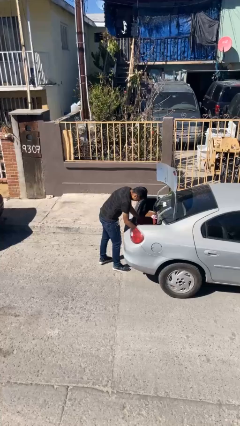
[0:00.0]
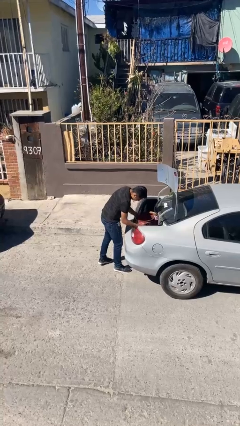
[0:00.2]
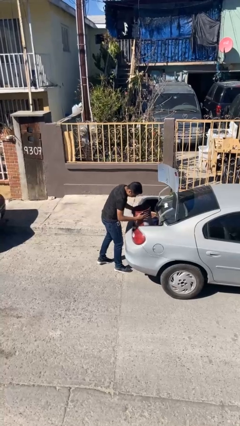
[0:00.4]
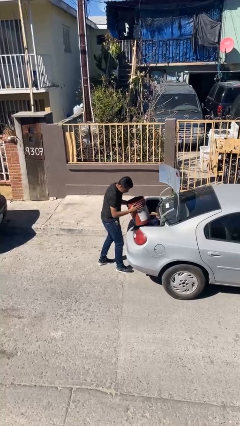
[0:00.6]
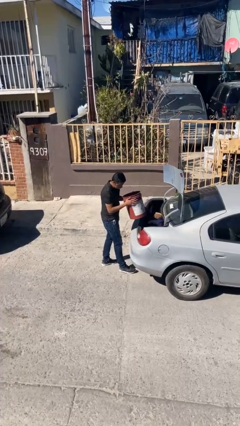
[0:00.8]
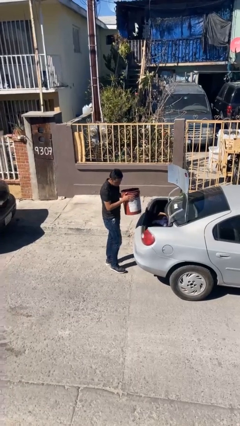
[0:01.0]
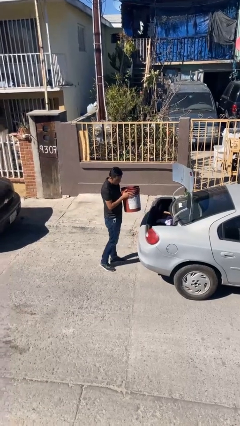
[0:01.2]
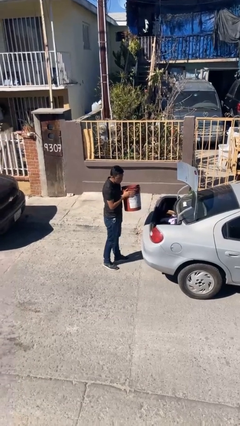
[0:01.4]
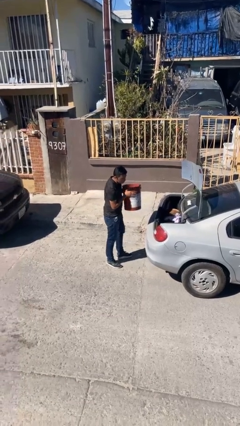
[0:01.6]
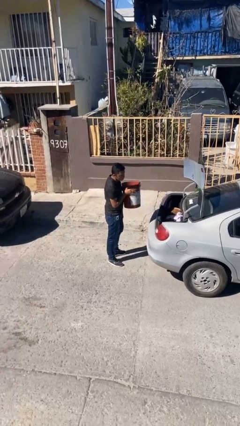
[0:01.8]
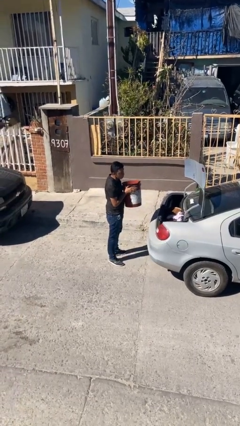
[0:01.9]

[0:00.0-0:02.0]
person unloads car

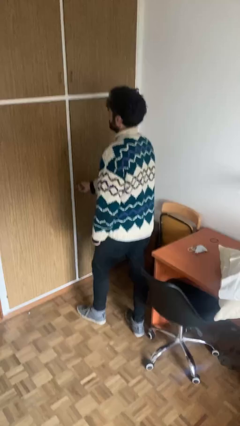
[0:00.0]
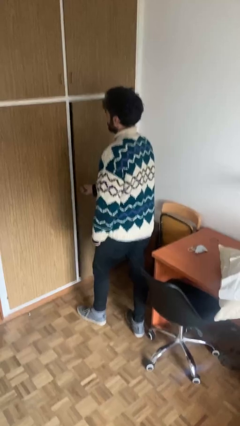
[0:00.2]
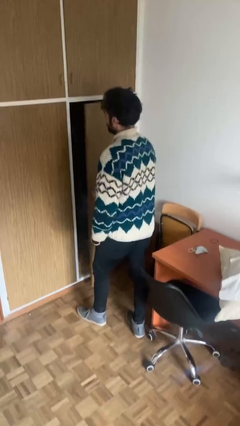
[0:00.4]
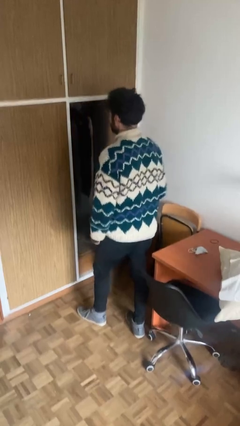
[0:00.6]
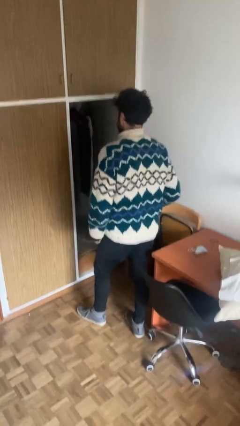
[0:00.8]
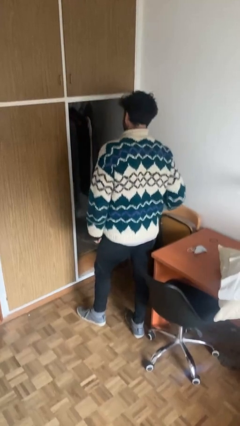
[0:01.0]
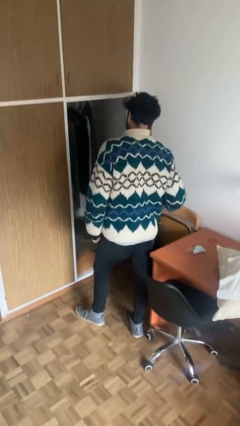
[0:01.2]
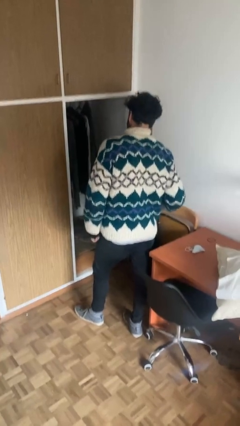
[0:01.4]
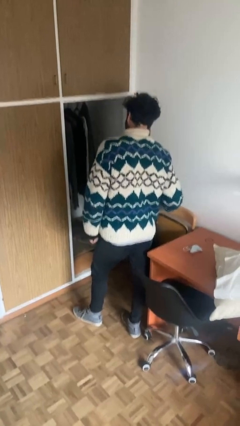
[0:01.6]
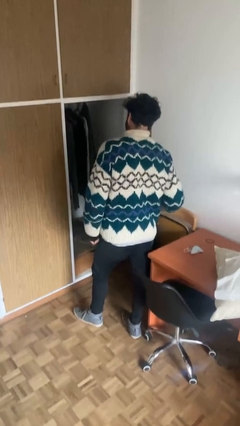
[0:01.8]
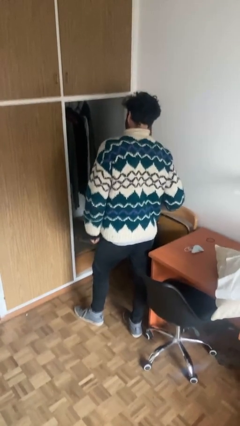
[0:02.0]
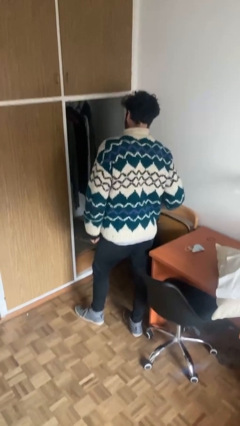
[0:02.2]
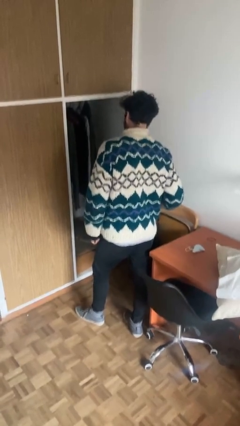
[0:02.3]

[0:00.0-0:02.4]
person opens closet door

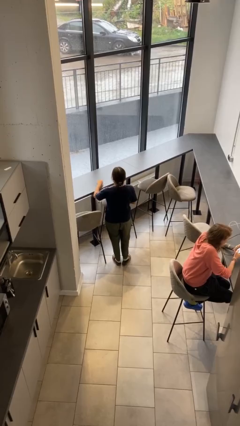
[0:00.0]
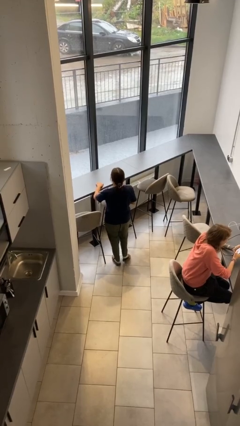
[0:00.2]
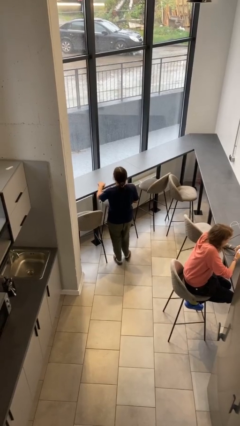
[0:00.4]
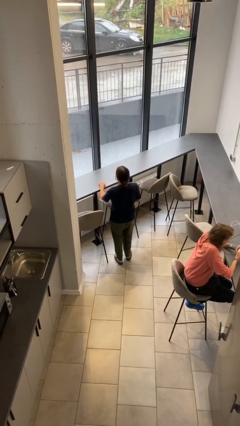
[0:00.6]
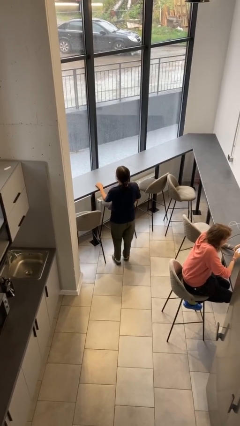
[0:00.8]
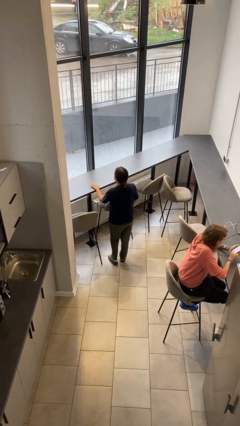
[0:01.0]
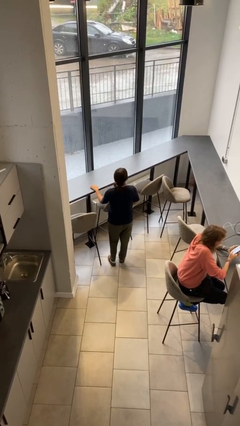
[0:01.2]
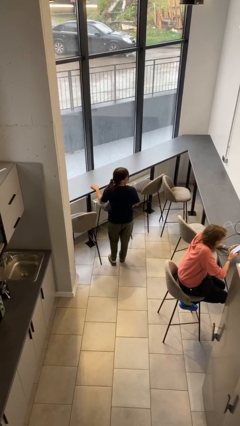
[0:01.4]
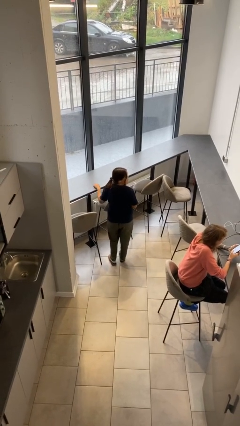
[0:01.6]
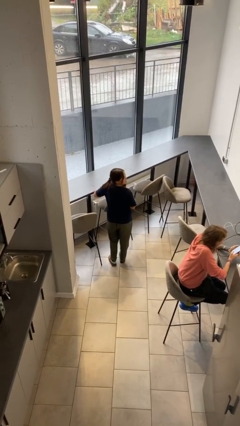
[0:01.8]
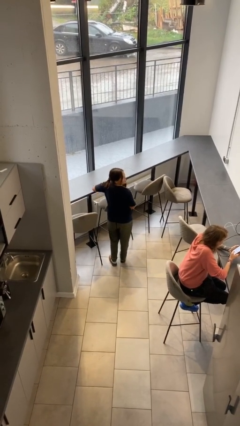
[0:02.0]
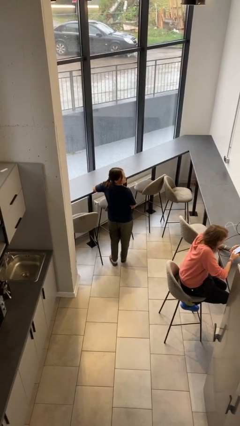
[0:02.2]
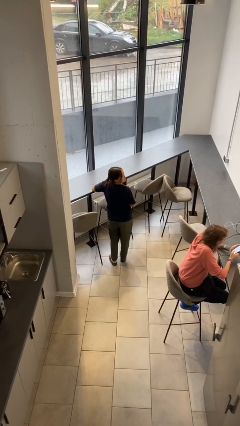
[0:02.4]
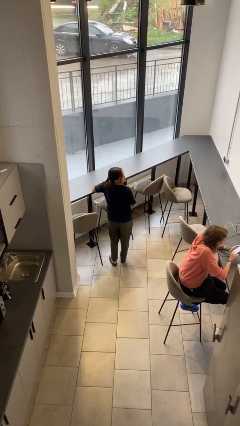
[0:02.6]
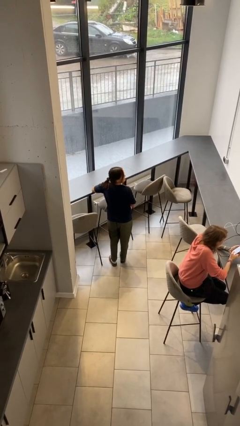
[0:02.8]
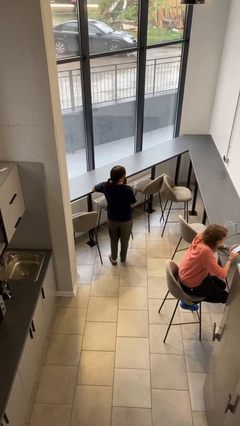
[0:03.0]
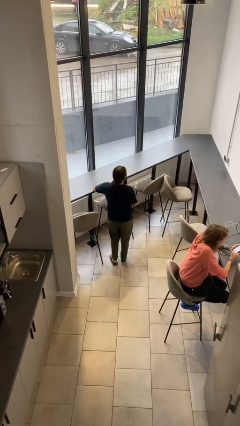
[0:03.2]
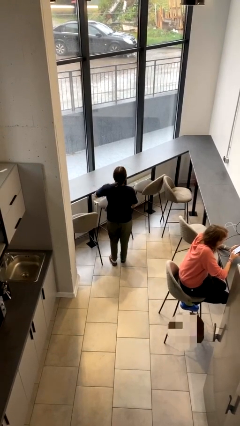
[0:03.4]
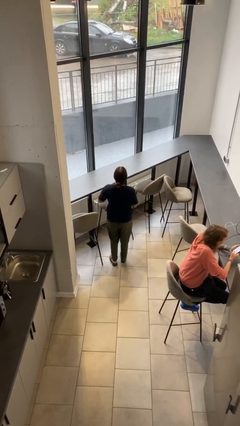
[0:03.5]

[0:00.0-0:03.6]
person looks over shoulder

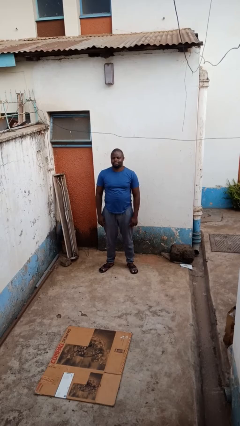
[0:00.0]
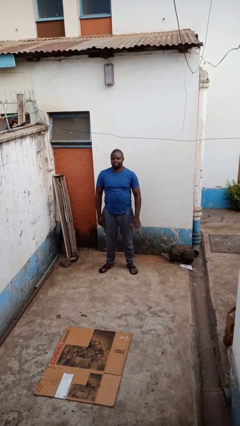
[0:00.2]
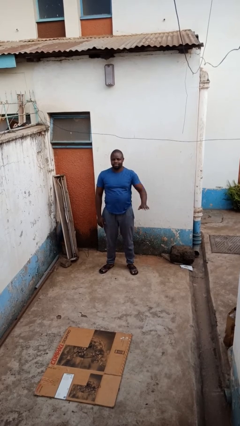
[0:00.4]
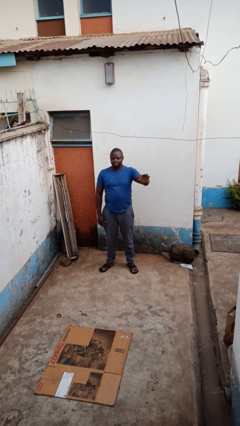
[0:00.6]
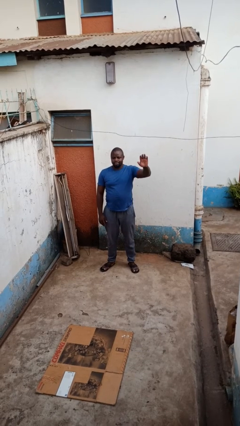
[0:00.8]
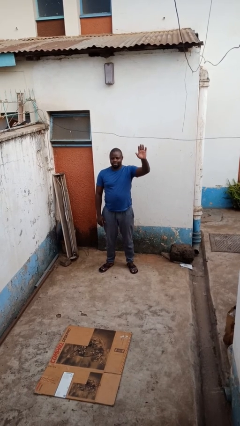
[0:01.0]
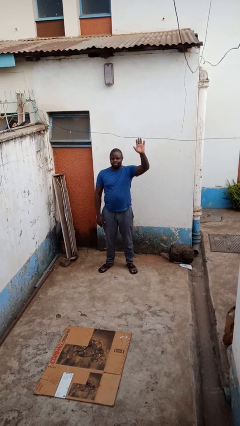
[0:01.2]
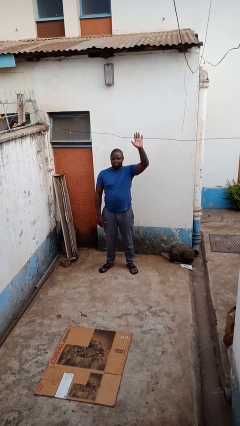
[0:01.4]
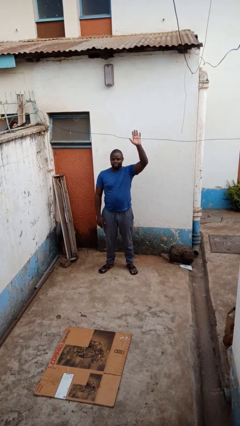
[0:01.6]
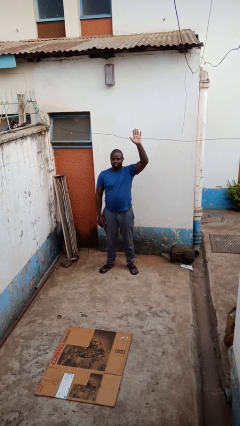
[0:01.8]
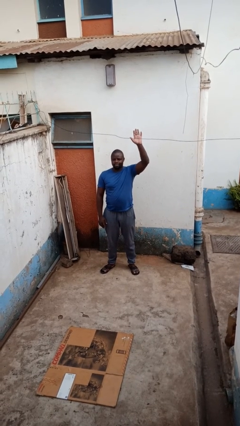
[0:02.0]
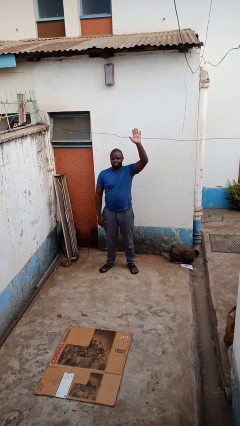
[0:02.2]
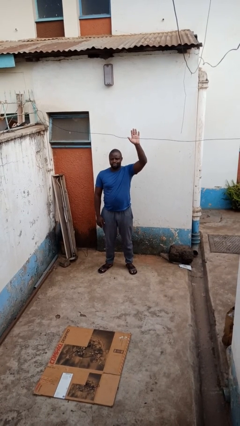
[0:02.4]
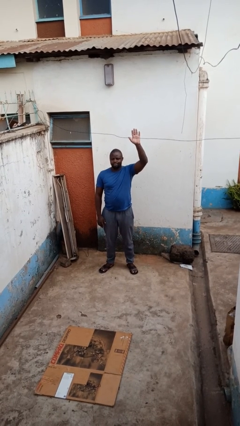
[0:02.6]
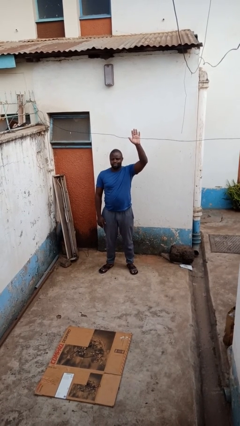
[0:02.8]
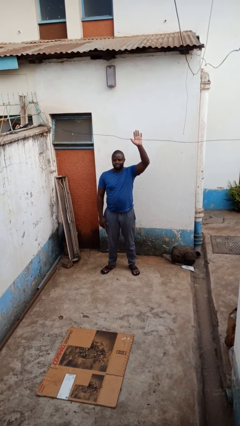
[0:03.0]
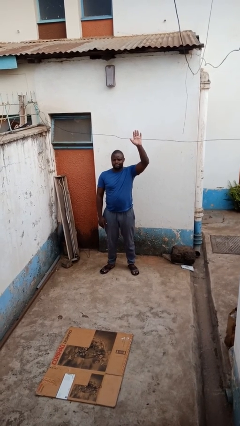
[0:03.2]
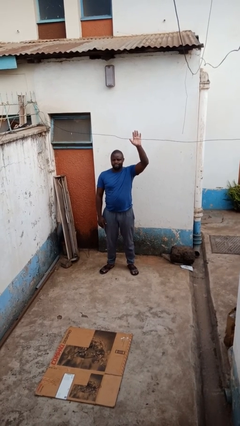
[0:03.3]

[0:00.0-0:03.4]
person gestures raise hand

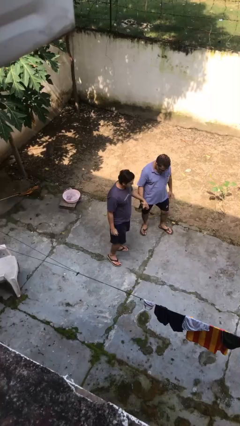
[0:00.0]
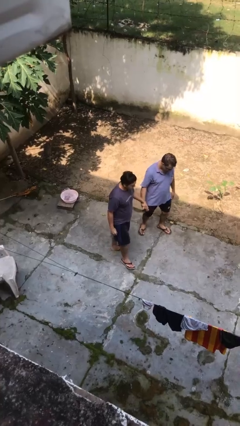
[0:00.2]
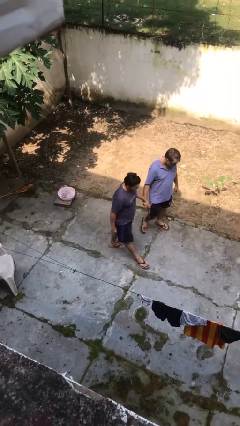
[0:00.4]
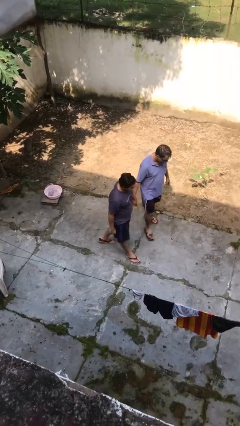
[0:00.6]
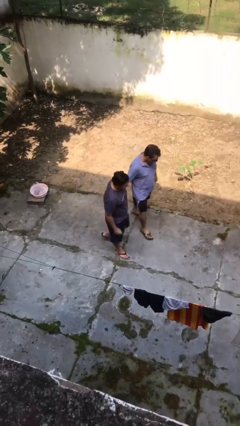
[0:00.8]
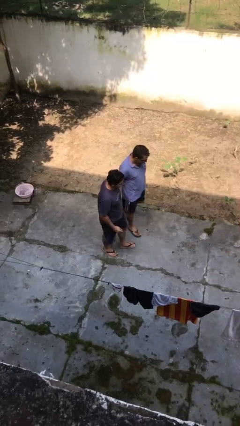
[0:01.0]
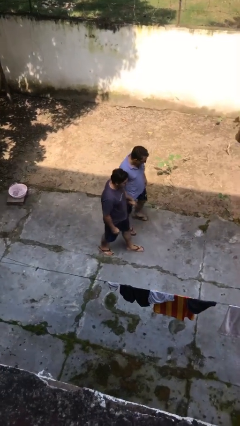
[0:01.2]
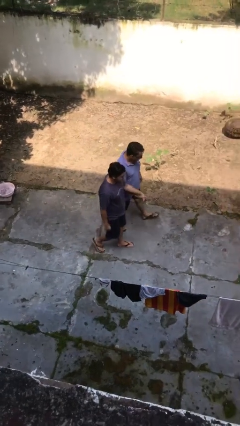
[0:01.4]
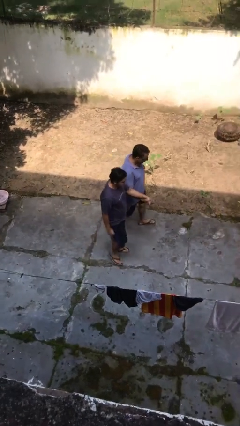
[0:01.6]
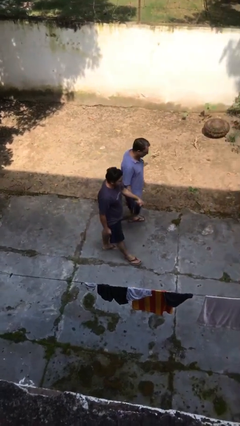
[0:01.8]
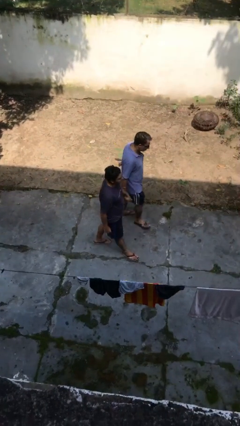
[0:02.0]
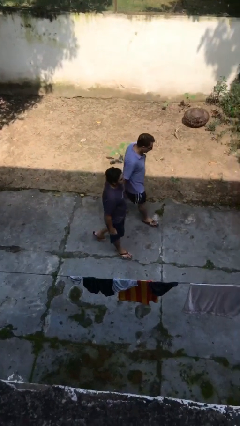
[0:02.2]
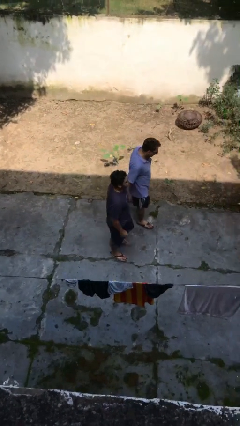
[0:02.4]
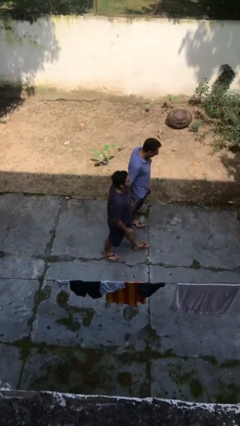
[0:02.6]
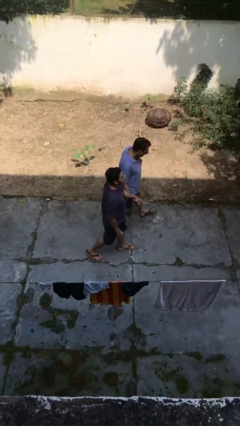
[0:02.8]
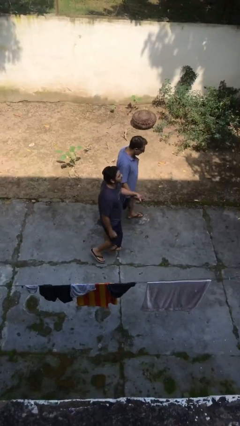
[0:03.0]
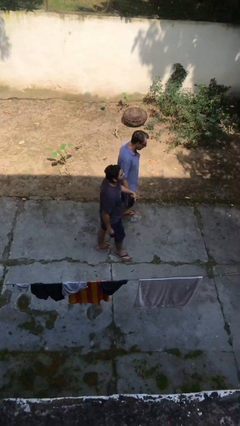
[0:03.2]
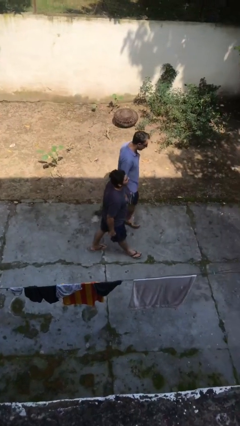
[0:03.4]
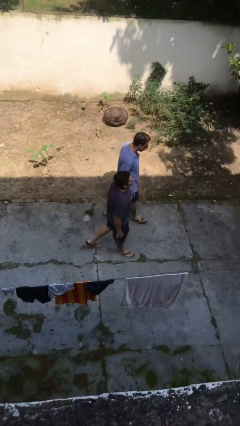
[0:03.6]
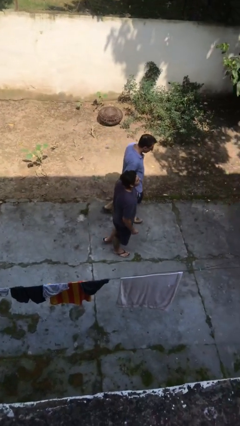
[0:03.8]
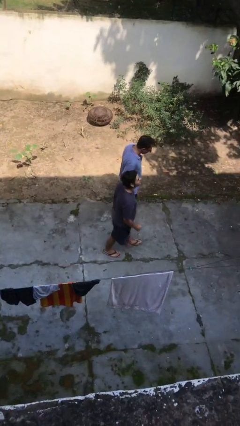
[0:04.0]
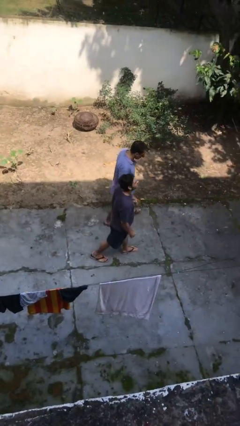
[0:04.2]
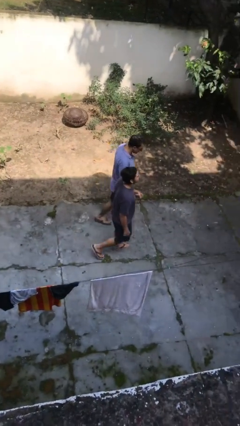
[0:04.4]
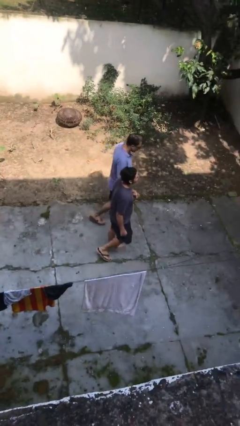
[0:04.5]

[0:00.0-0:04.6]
person holds hand

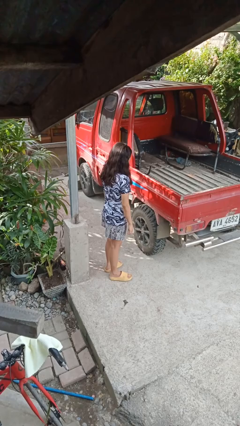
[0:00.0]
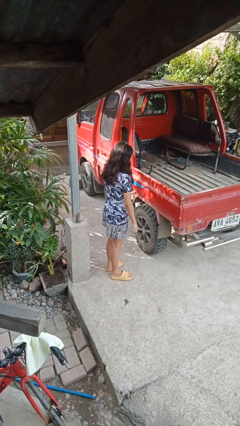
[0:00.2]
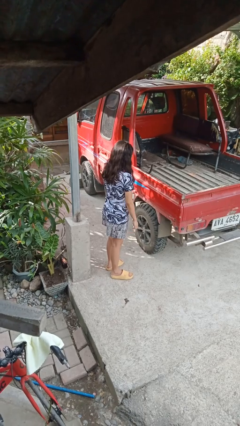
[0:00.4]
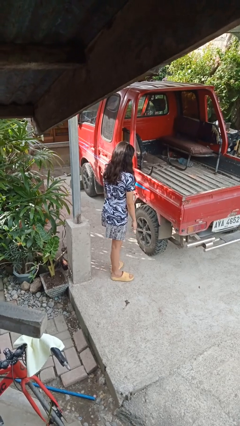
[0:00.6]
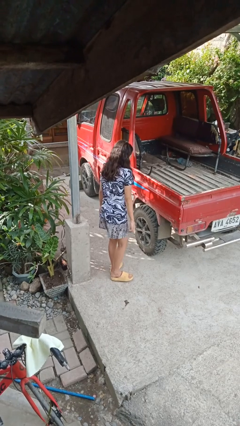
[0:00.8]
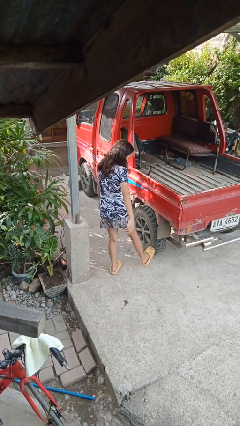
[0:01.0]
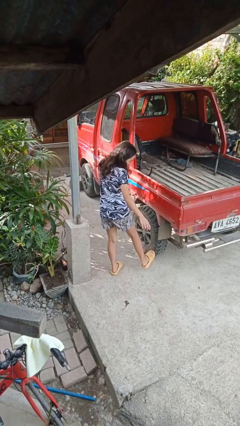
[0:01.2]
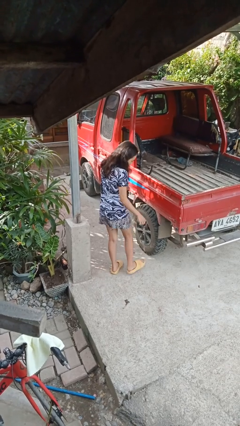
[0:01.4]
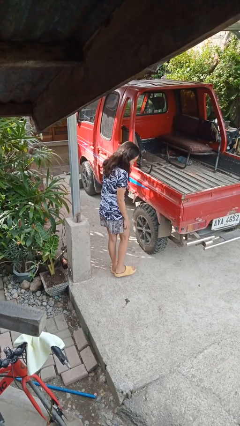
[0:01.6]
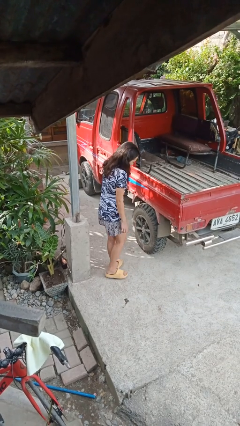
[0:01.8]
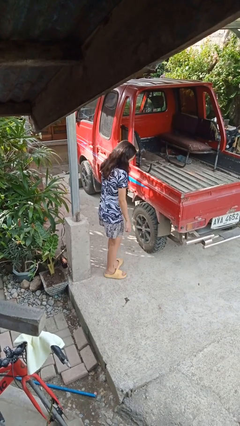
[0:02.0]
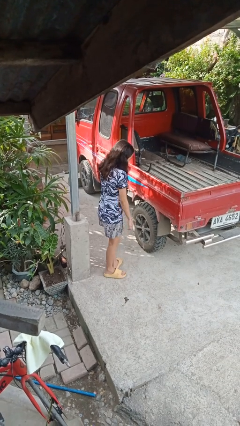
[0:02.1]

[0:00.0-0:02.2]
person kicks car tires
